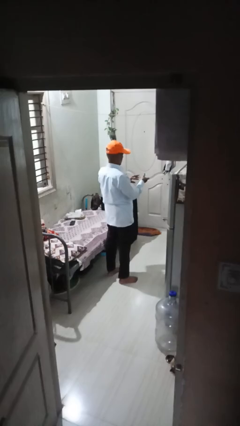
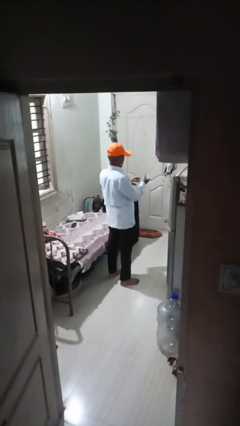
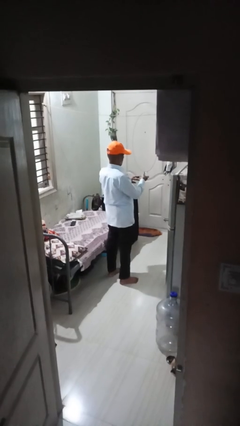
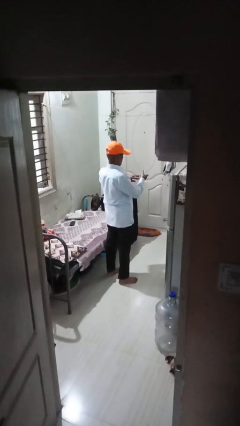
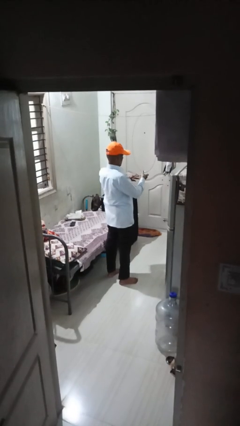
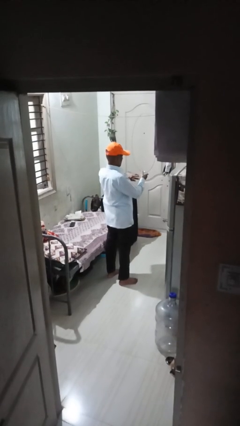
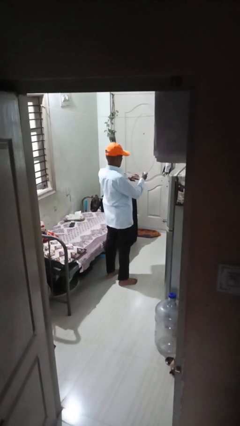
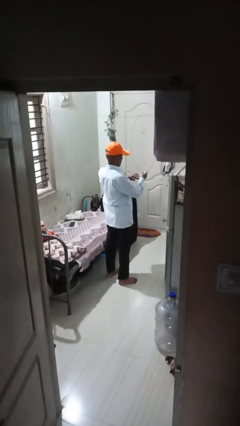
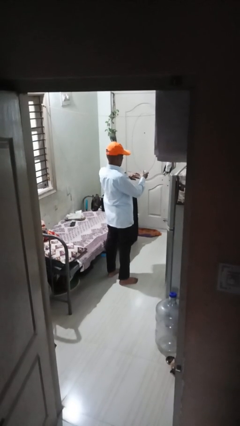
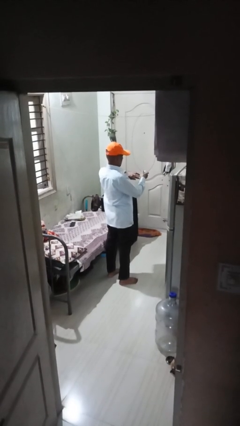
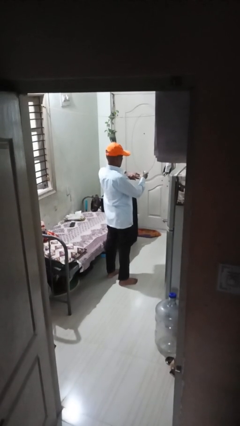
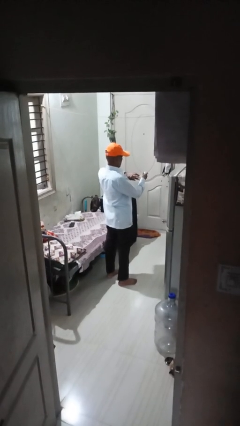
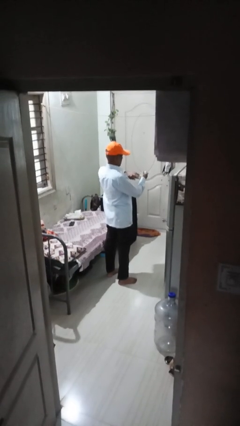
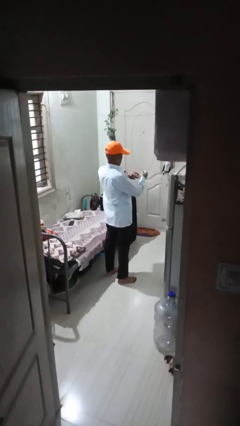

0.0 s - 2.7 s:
person clips fingernails

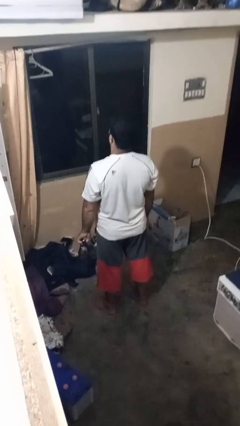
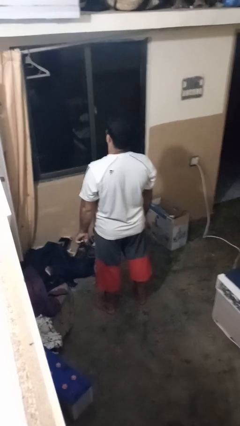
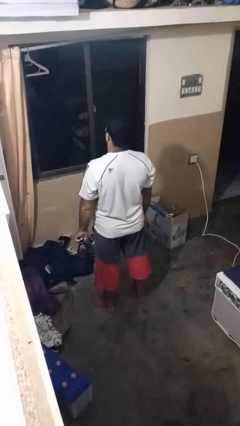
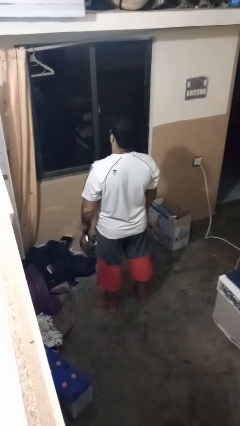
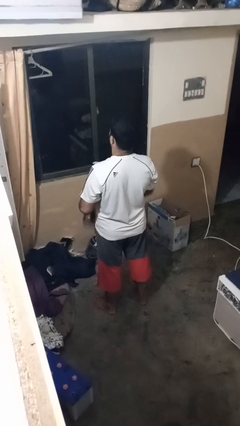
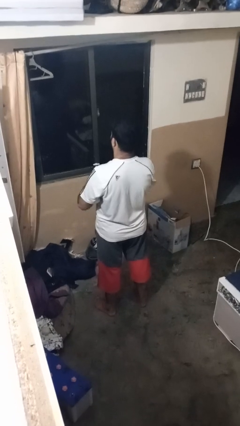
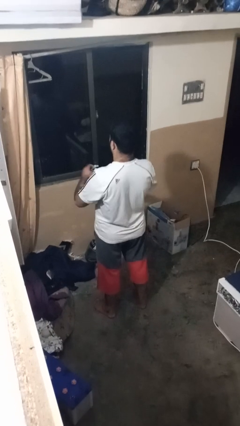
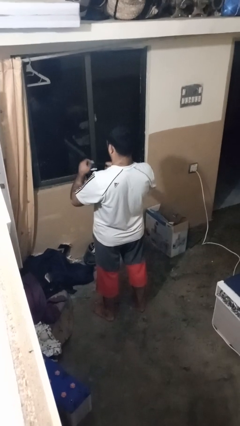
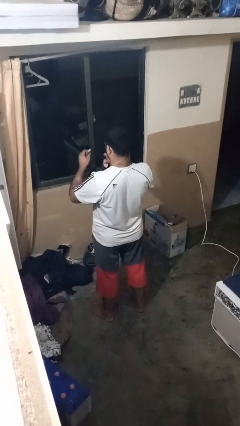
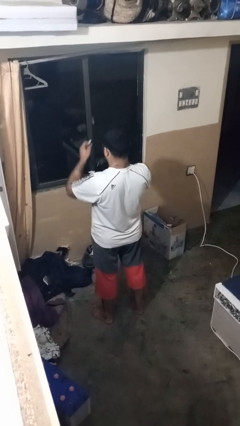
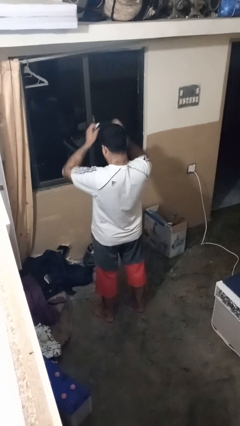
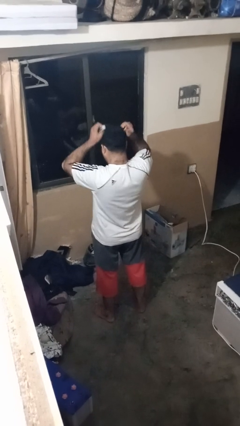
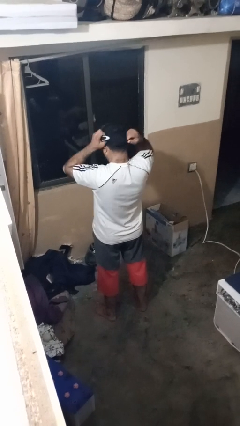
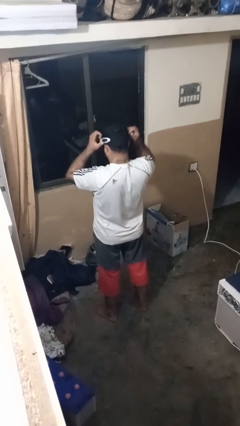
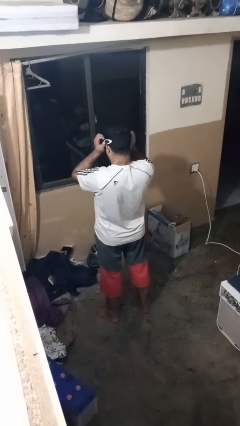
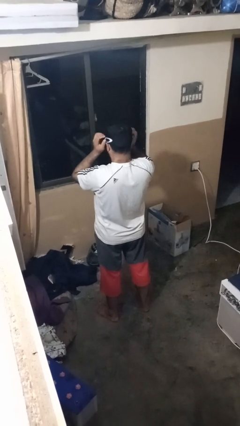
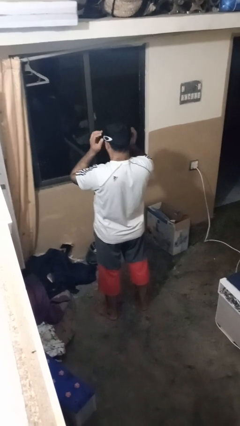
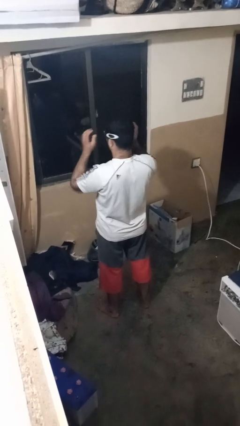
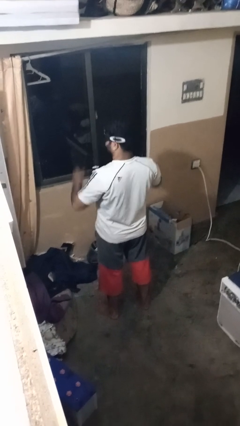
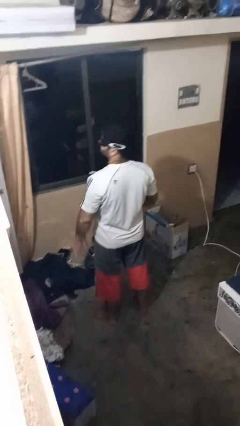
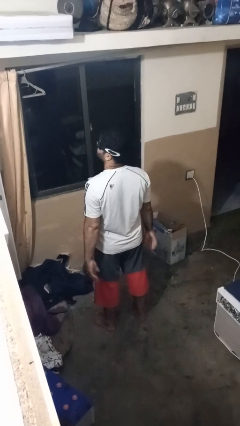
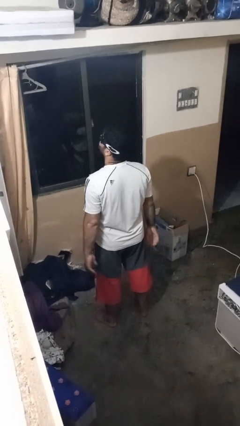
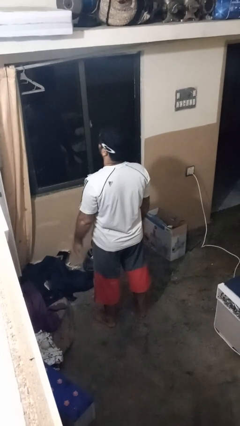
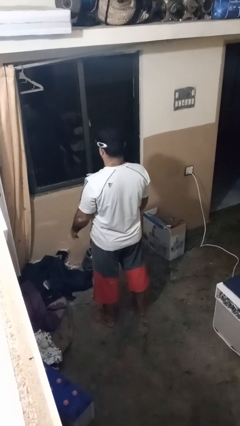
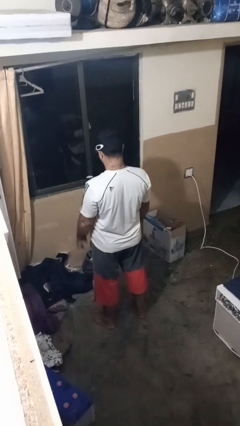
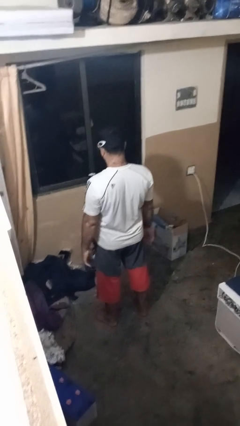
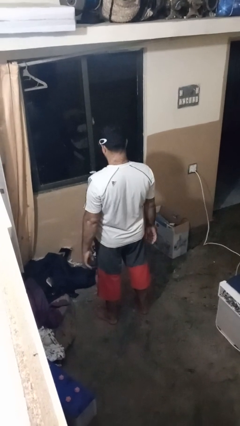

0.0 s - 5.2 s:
person puts on sunglasses

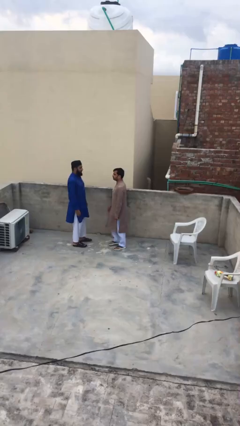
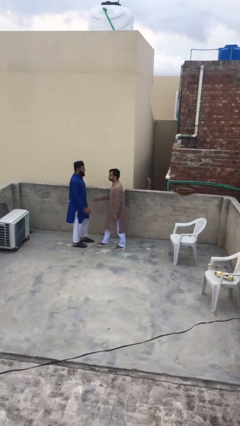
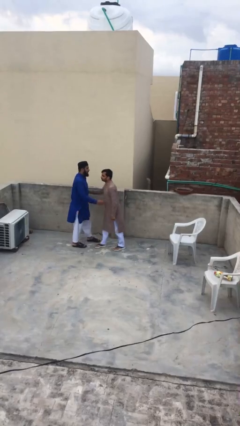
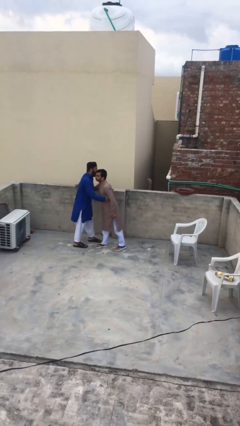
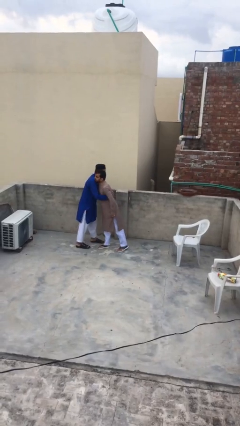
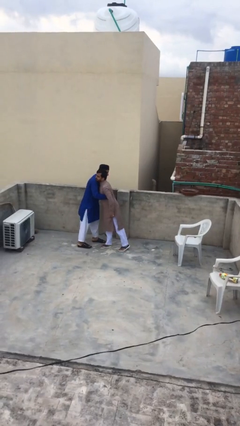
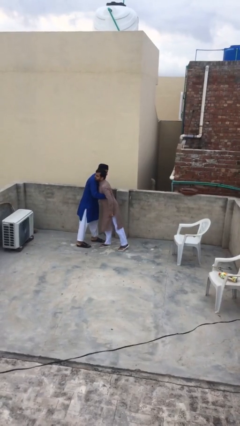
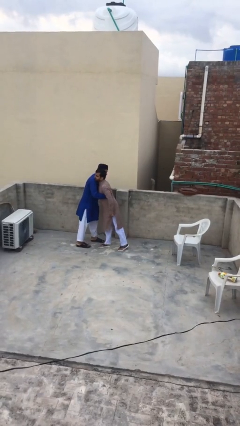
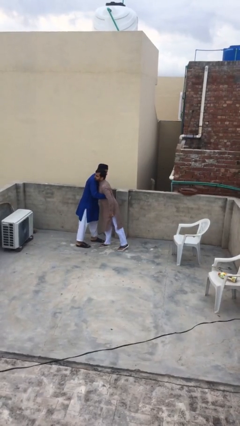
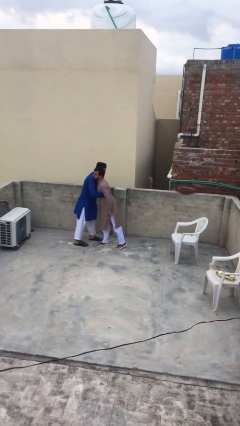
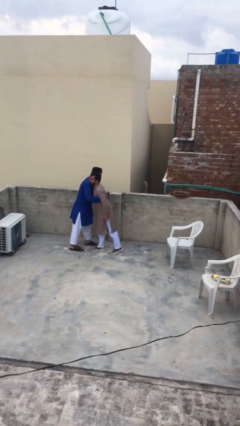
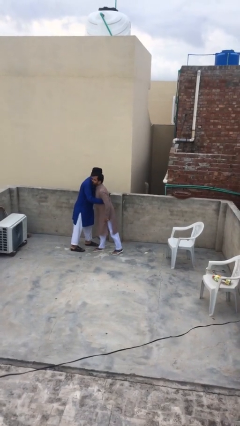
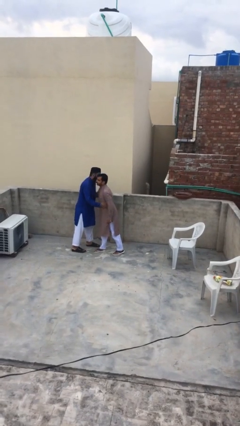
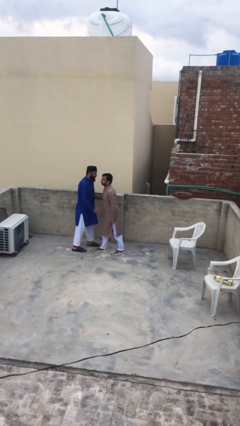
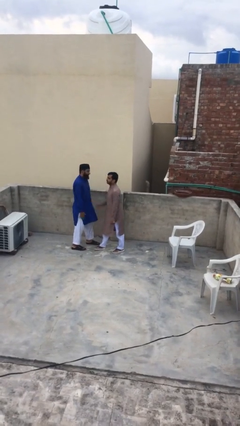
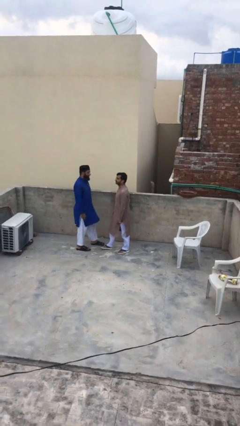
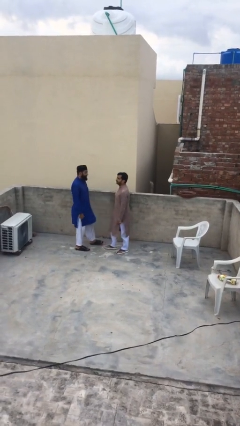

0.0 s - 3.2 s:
person embraces person

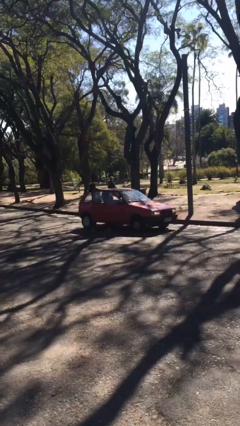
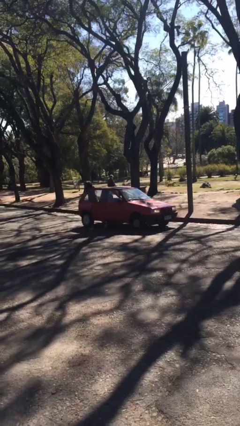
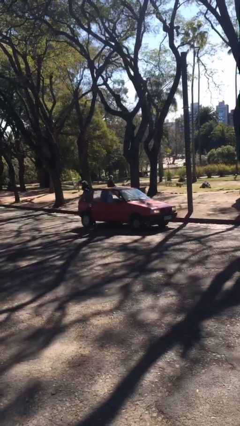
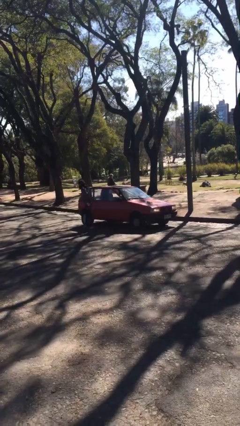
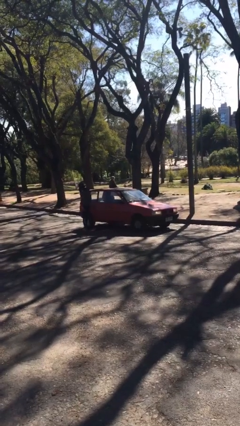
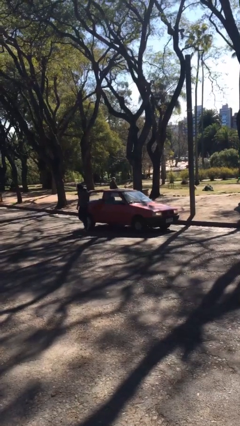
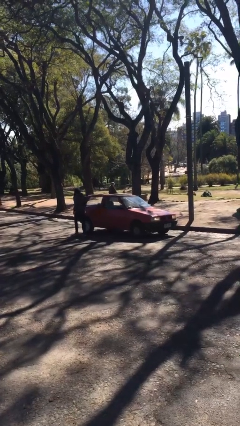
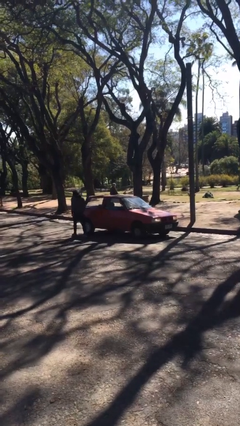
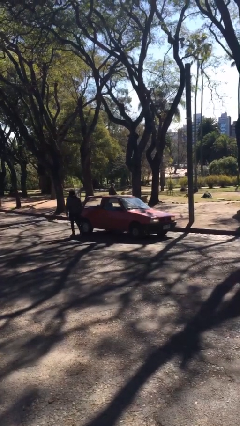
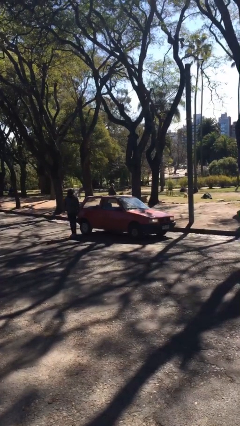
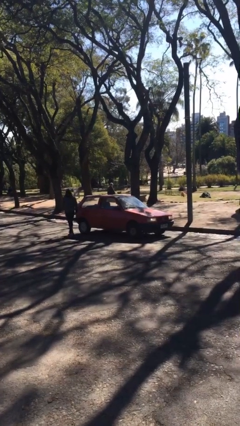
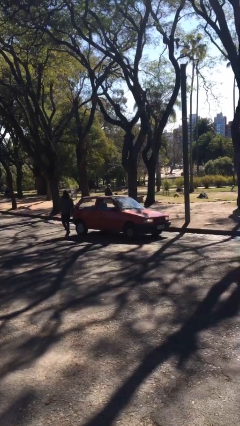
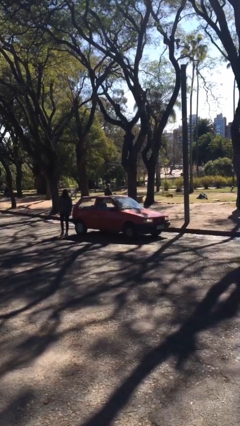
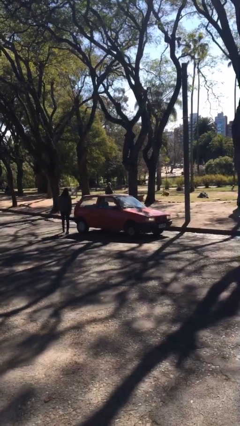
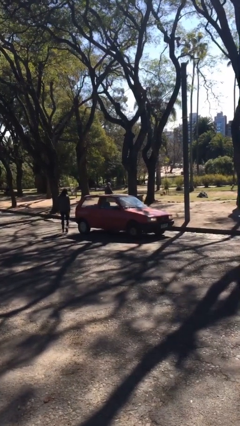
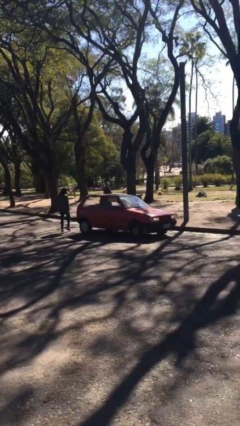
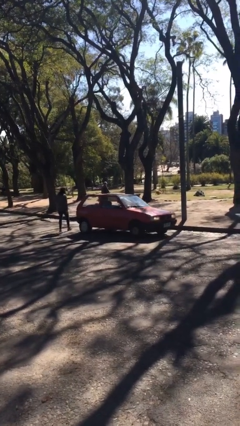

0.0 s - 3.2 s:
car drops off person

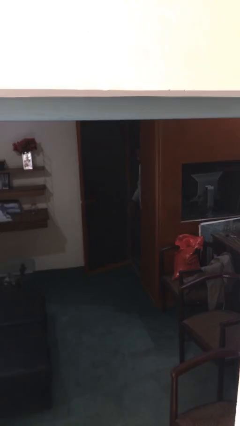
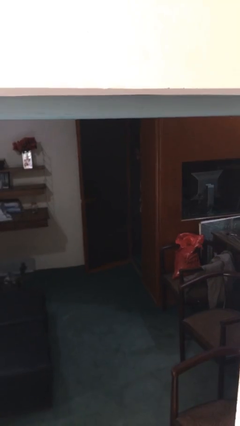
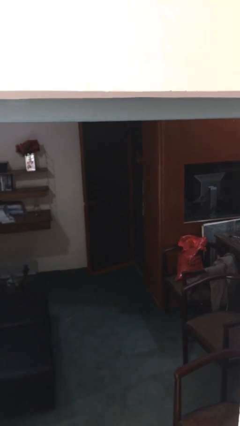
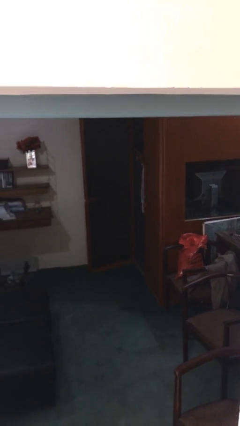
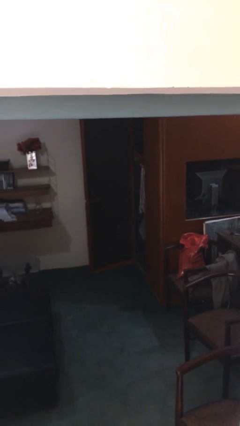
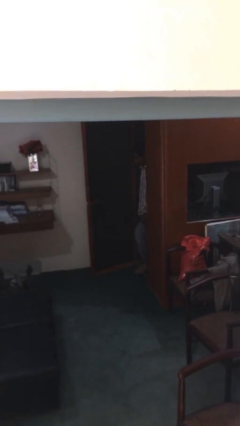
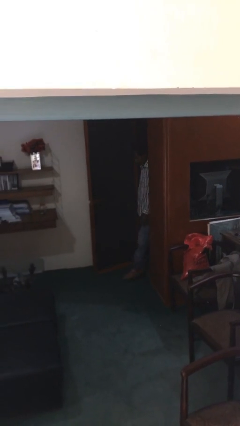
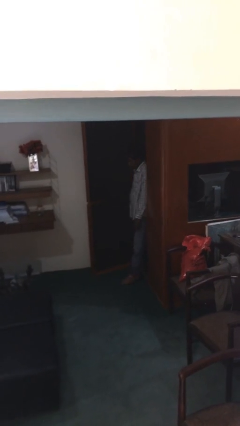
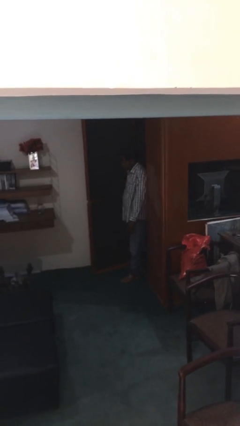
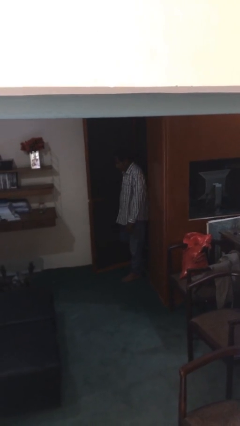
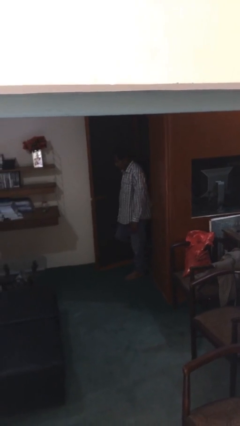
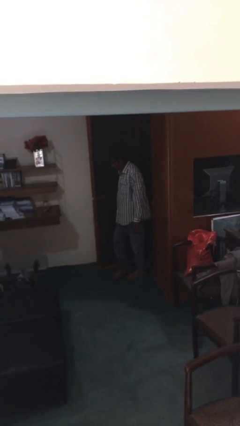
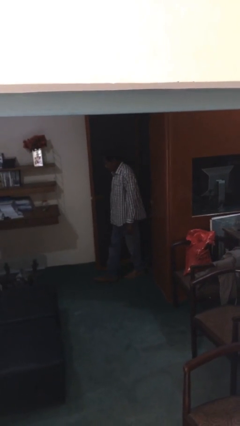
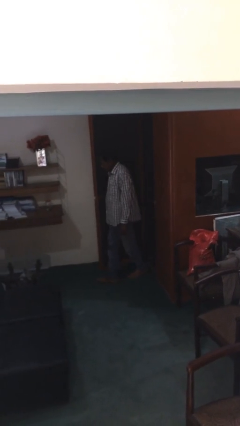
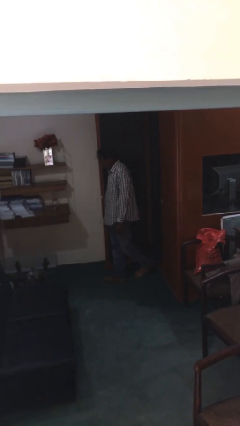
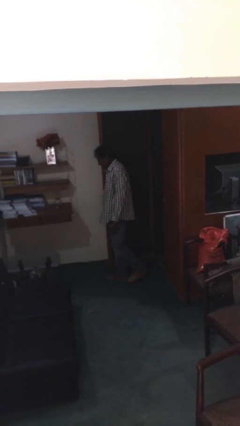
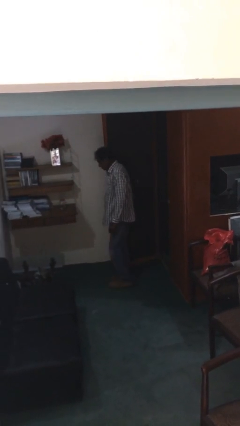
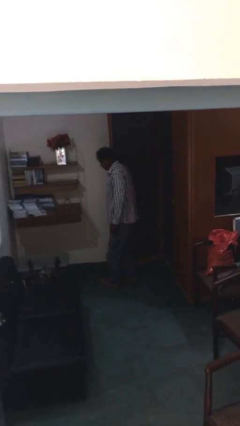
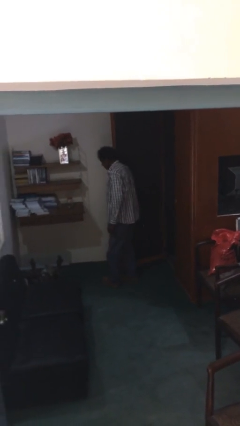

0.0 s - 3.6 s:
person enters scene through structure

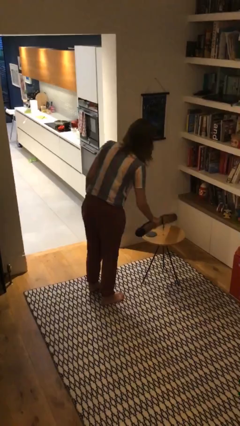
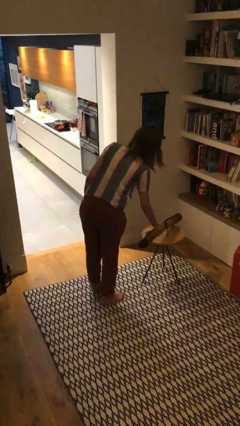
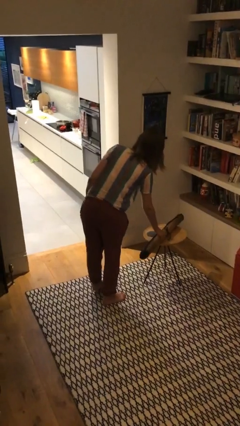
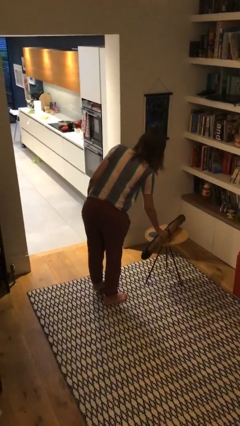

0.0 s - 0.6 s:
person puts down object on table
